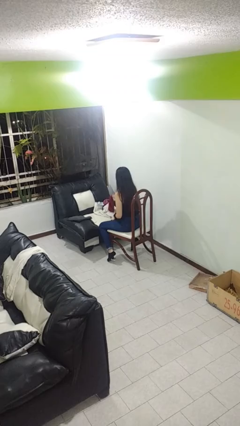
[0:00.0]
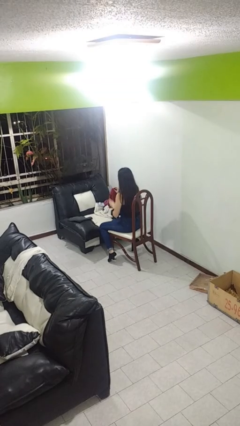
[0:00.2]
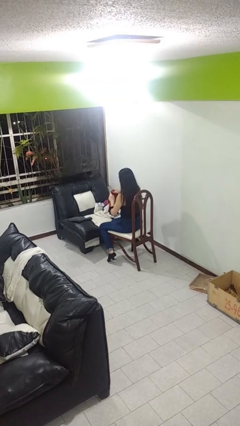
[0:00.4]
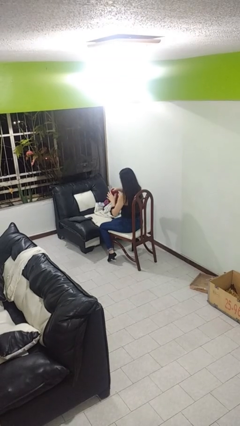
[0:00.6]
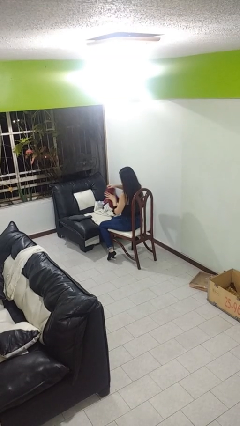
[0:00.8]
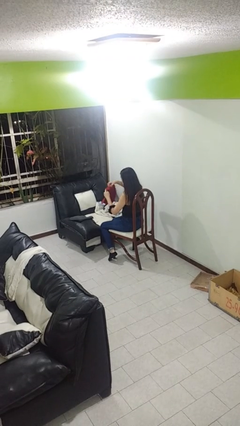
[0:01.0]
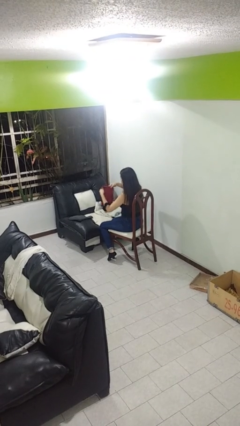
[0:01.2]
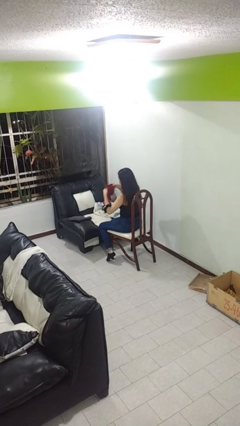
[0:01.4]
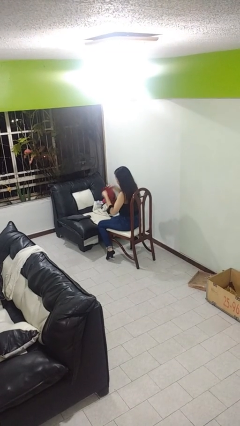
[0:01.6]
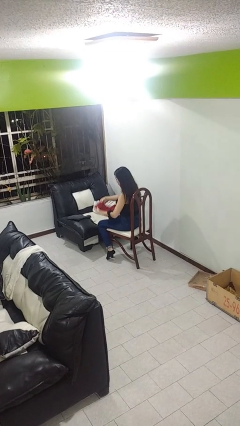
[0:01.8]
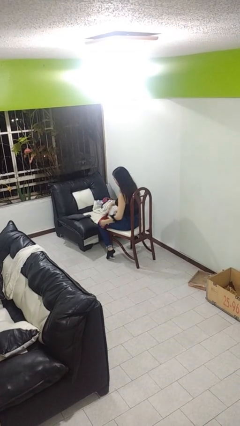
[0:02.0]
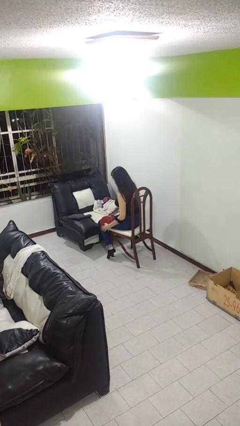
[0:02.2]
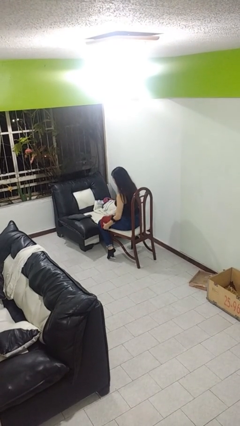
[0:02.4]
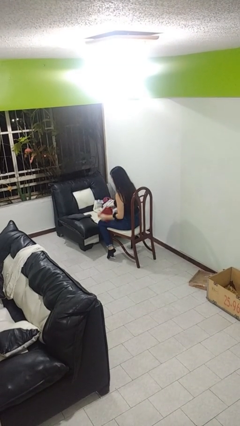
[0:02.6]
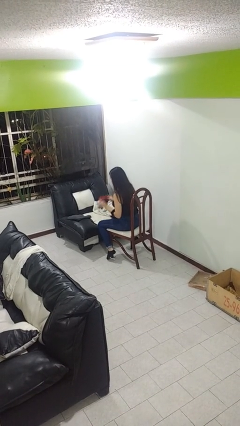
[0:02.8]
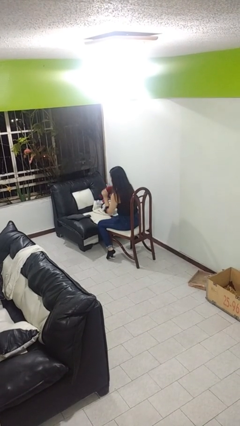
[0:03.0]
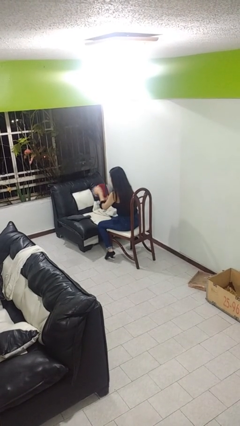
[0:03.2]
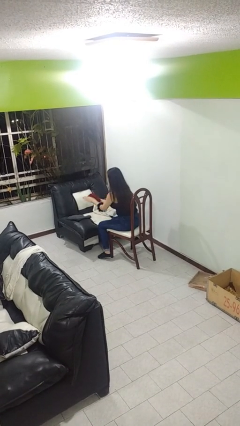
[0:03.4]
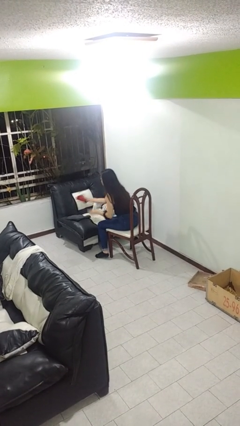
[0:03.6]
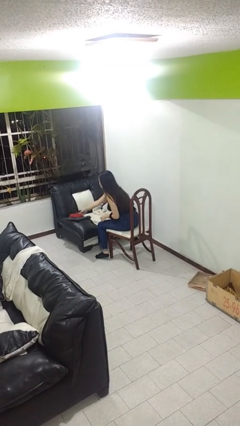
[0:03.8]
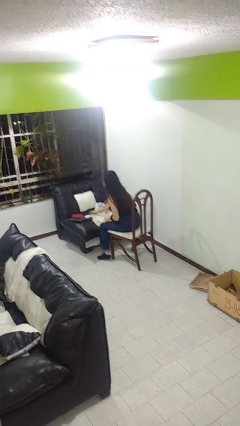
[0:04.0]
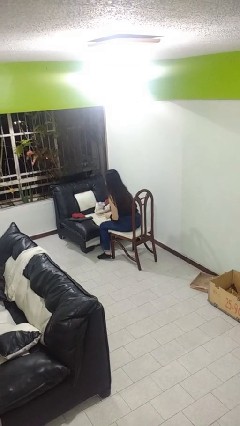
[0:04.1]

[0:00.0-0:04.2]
person folds towel

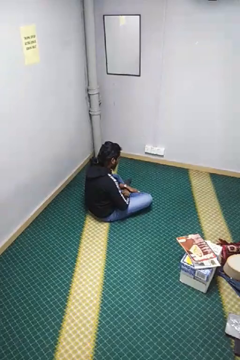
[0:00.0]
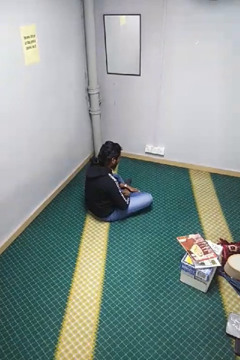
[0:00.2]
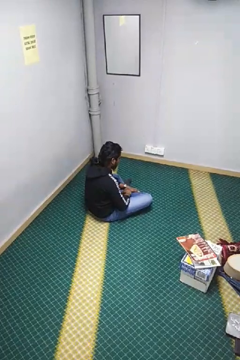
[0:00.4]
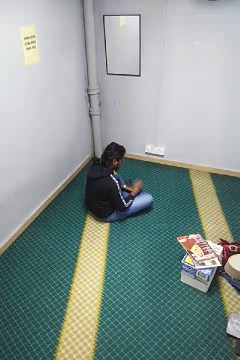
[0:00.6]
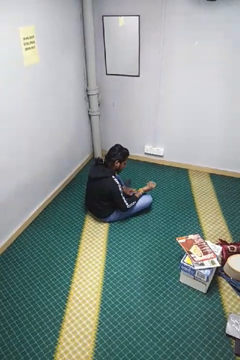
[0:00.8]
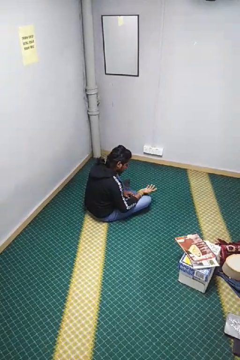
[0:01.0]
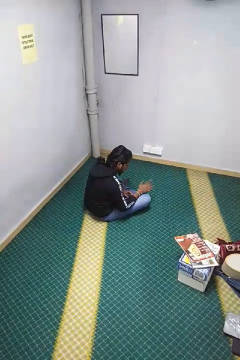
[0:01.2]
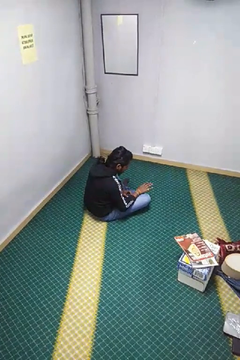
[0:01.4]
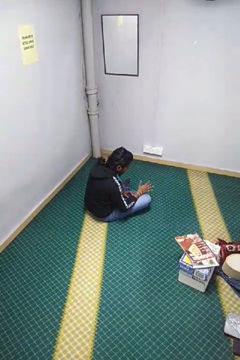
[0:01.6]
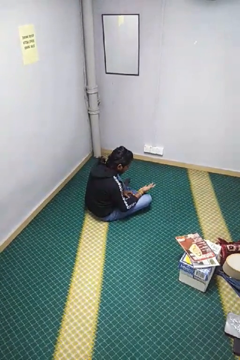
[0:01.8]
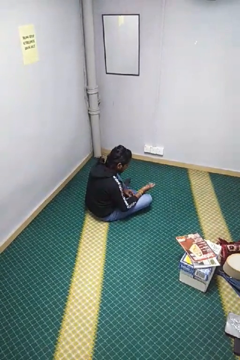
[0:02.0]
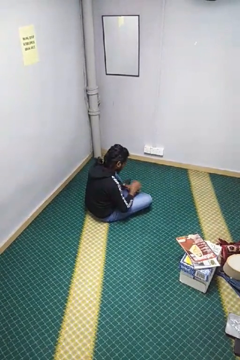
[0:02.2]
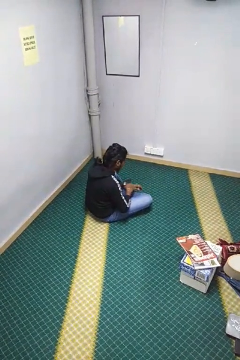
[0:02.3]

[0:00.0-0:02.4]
person looks at hands in lap

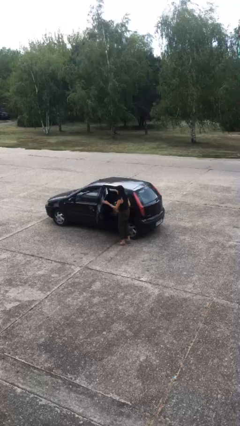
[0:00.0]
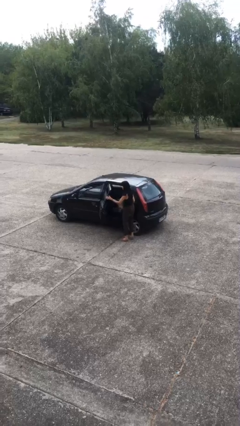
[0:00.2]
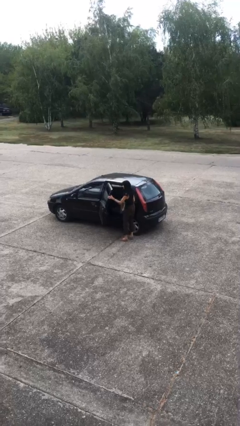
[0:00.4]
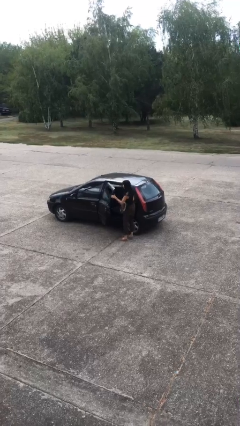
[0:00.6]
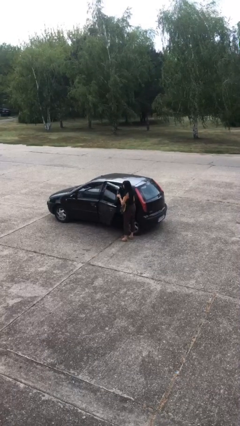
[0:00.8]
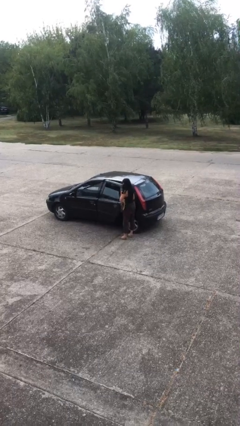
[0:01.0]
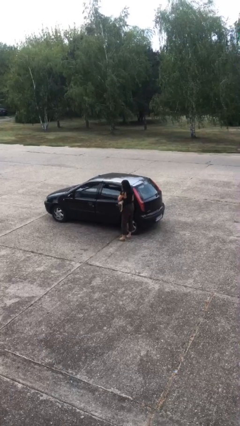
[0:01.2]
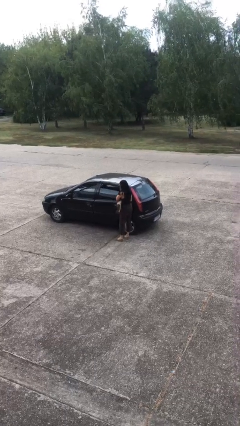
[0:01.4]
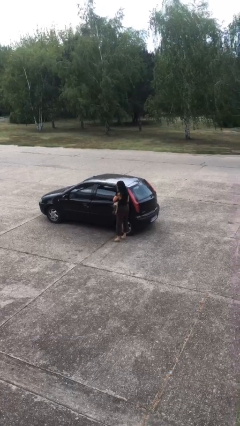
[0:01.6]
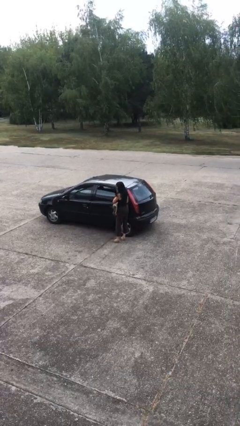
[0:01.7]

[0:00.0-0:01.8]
person closes car door

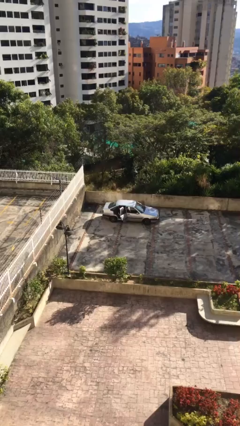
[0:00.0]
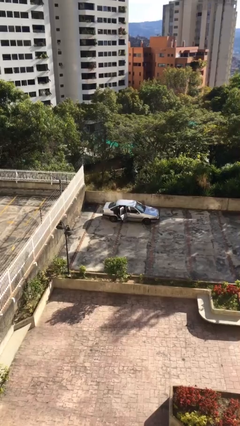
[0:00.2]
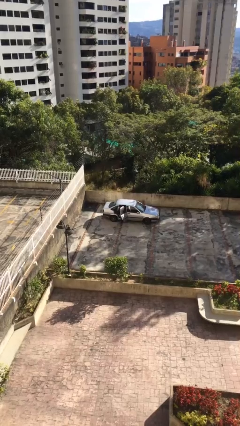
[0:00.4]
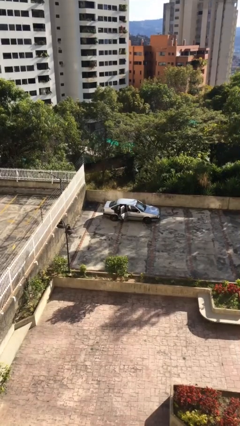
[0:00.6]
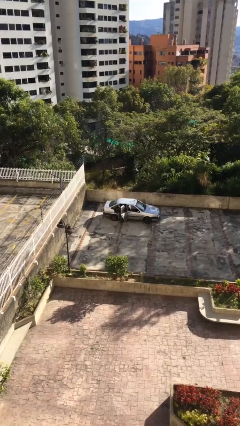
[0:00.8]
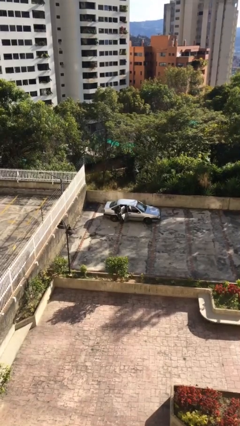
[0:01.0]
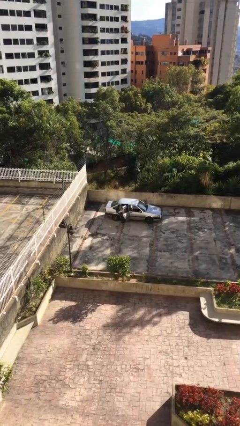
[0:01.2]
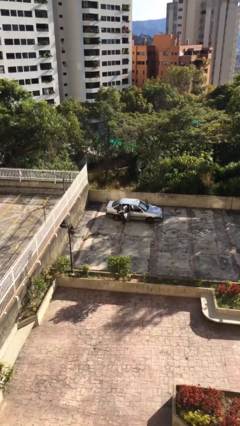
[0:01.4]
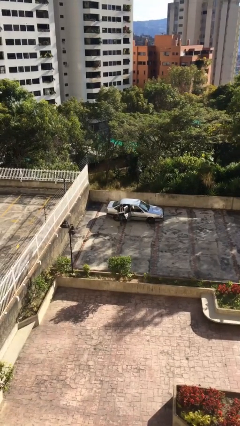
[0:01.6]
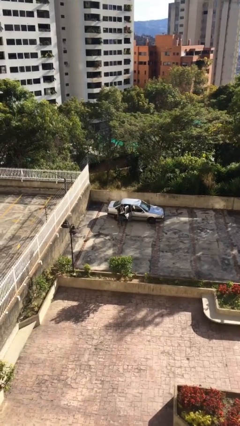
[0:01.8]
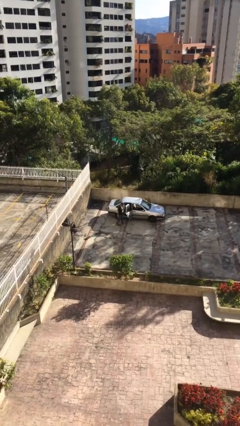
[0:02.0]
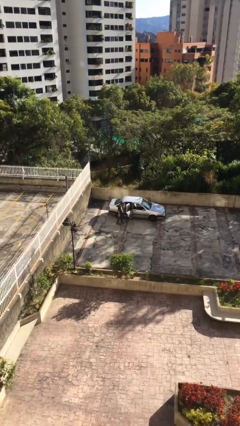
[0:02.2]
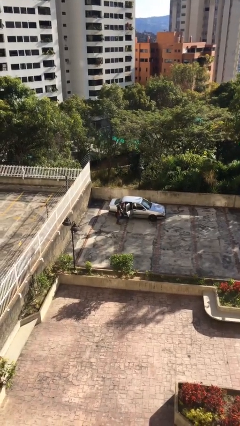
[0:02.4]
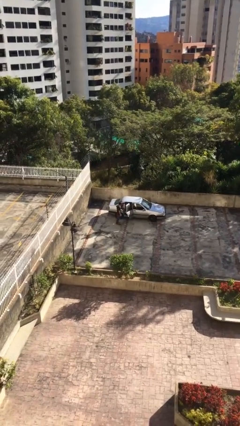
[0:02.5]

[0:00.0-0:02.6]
person exits car

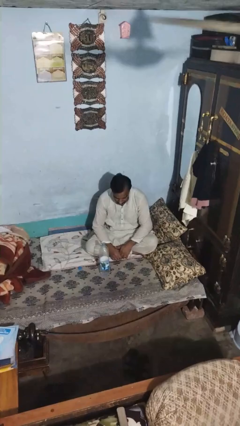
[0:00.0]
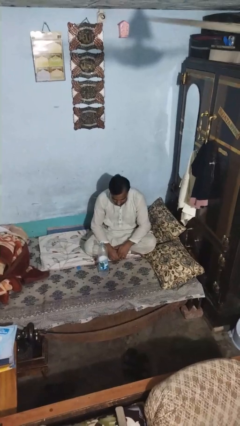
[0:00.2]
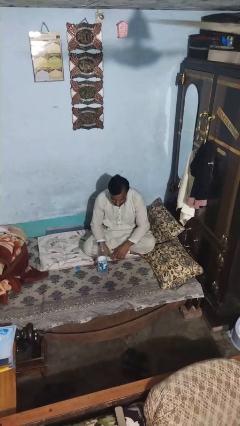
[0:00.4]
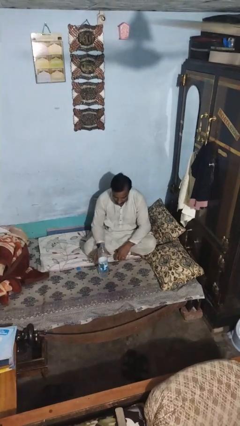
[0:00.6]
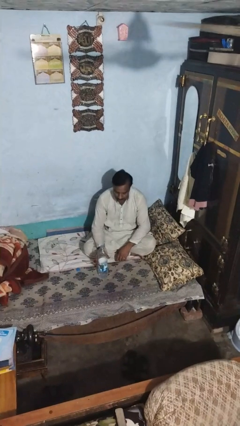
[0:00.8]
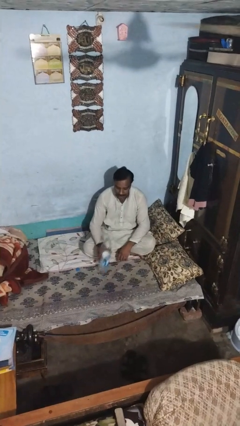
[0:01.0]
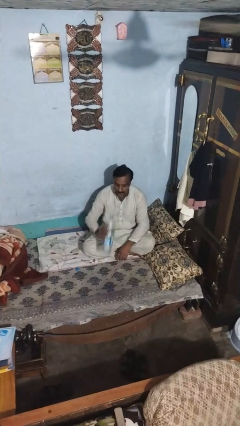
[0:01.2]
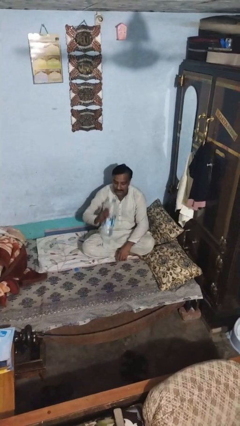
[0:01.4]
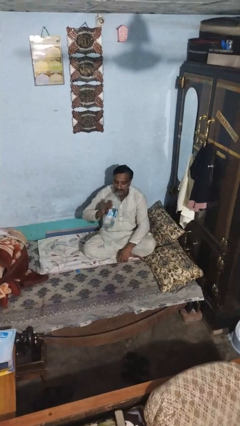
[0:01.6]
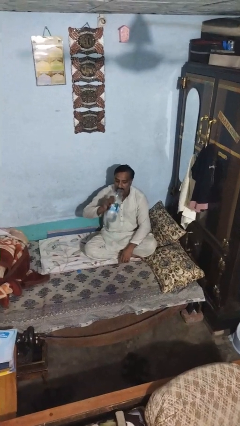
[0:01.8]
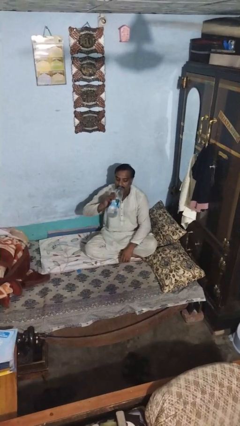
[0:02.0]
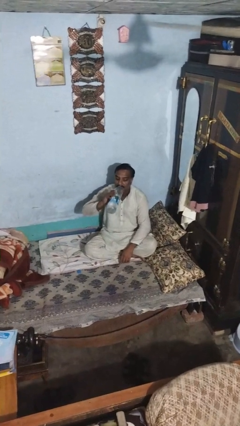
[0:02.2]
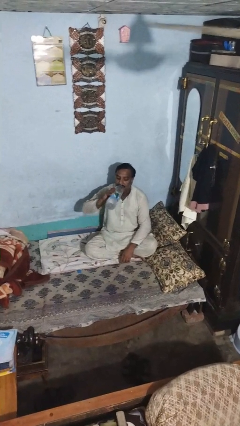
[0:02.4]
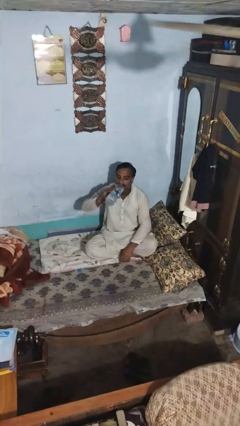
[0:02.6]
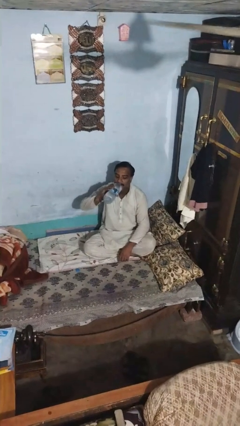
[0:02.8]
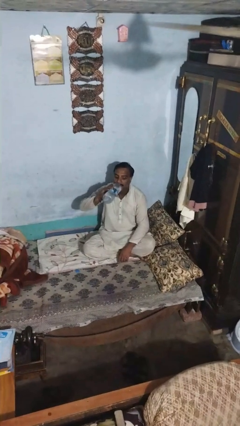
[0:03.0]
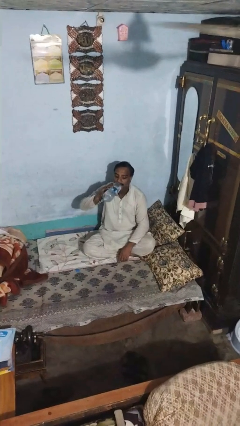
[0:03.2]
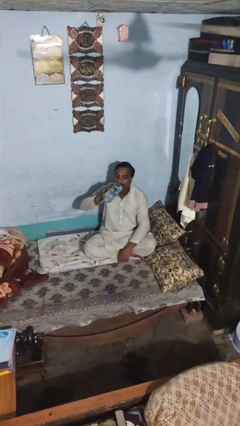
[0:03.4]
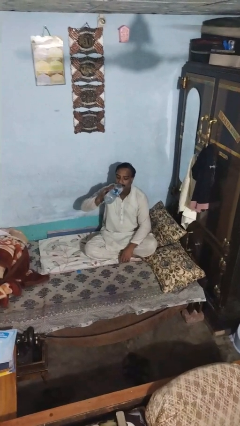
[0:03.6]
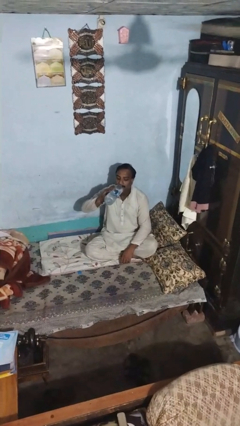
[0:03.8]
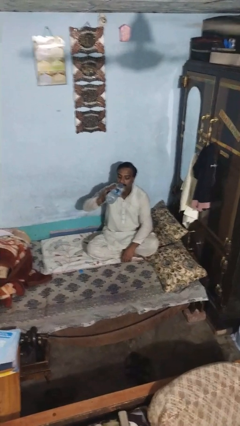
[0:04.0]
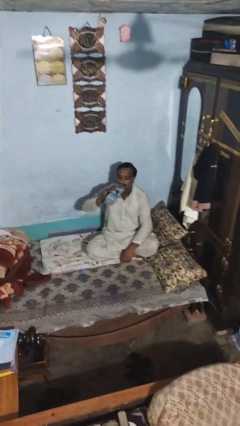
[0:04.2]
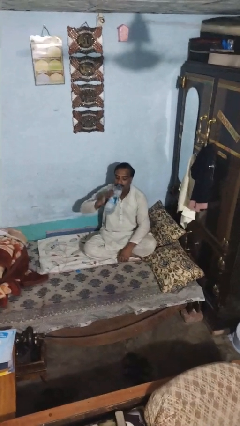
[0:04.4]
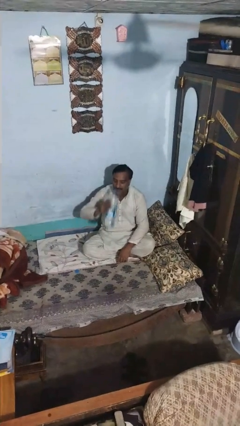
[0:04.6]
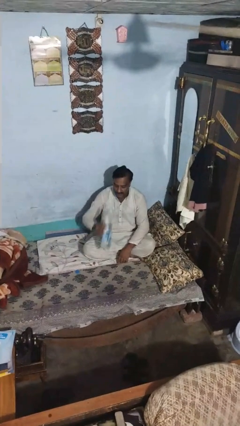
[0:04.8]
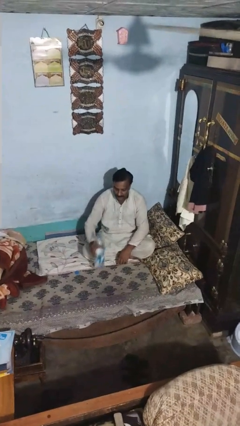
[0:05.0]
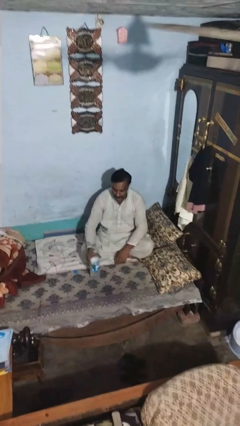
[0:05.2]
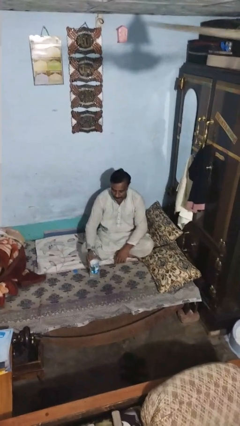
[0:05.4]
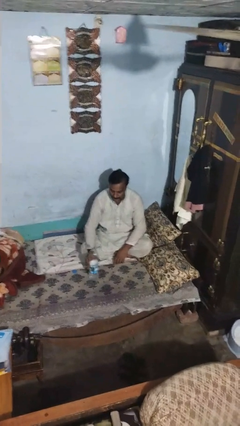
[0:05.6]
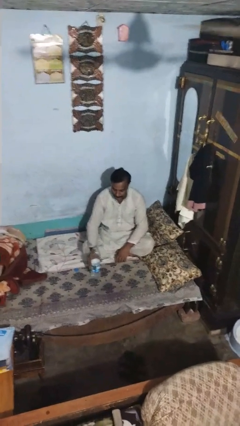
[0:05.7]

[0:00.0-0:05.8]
person drinks from bottle

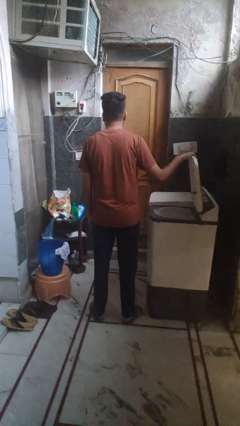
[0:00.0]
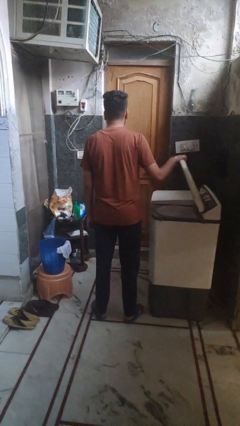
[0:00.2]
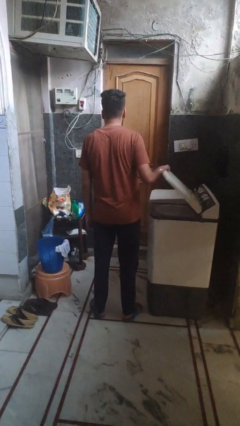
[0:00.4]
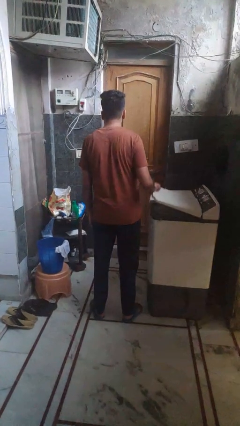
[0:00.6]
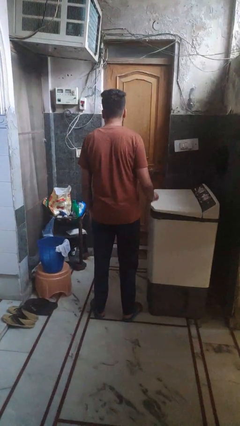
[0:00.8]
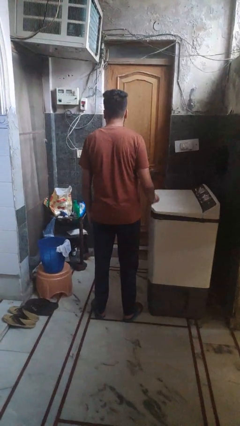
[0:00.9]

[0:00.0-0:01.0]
person closes clothes washer
